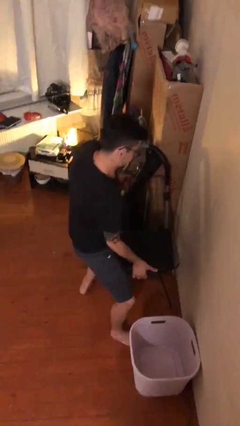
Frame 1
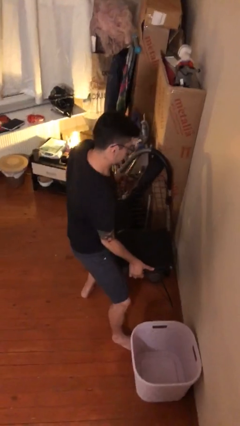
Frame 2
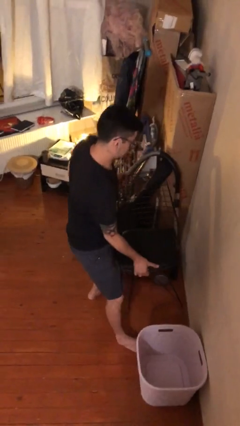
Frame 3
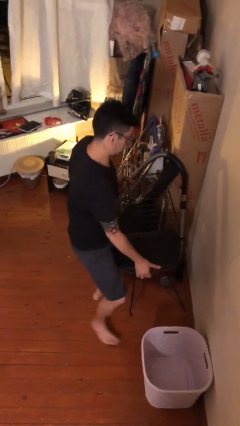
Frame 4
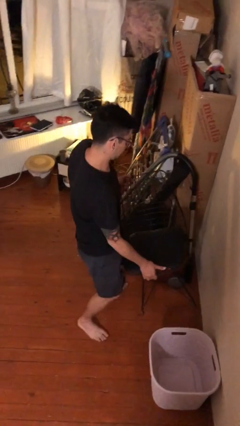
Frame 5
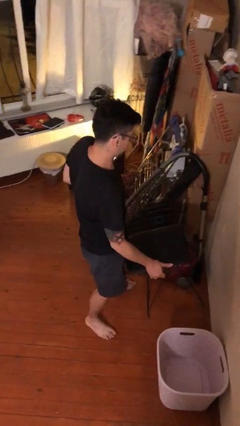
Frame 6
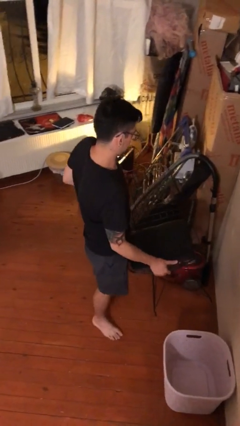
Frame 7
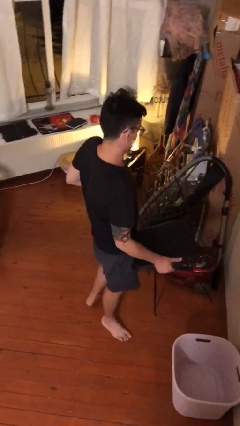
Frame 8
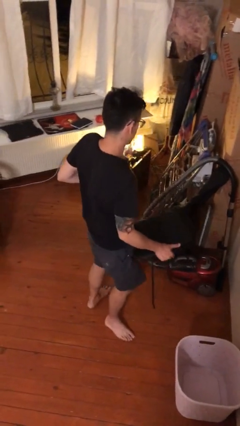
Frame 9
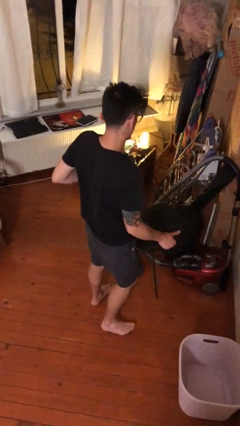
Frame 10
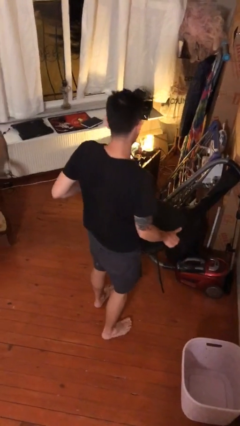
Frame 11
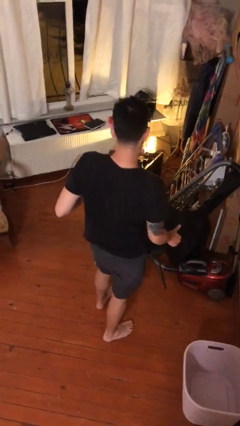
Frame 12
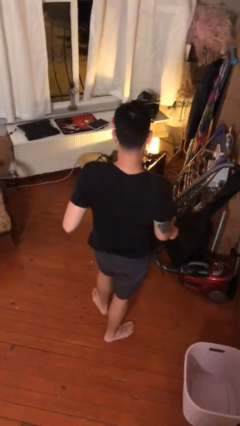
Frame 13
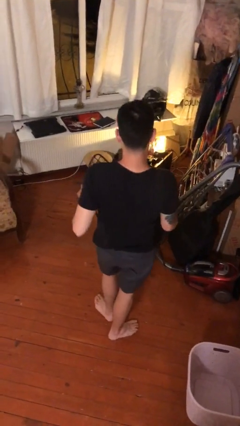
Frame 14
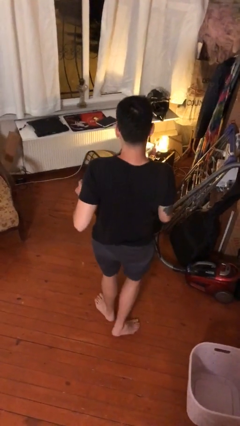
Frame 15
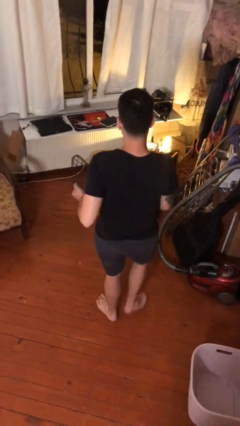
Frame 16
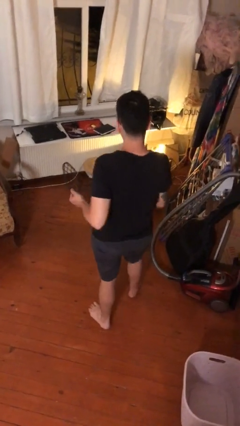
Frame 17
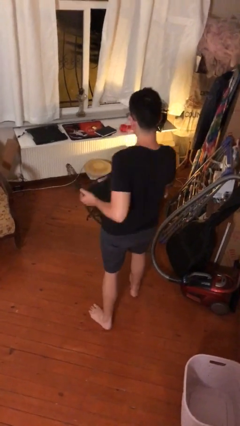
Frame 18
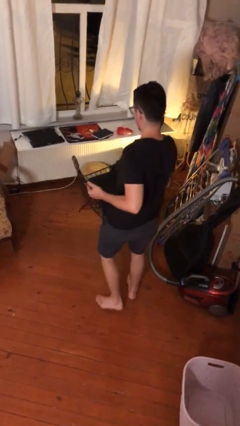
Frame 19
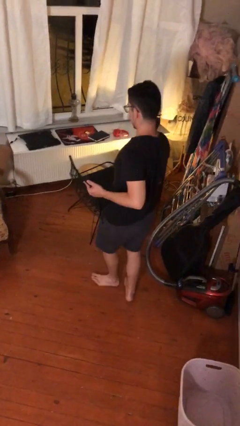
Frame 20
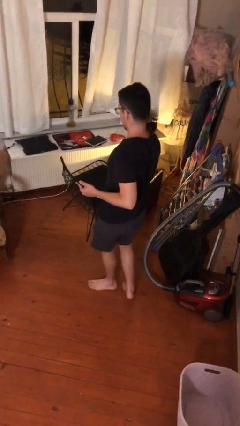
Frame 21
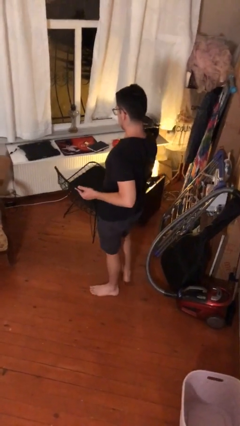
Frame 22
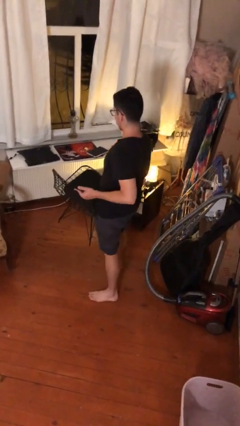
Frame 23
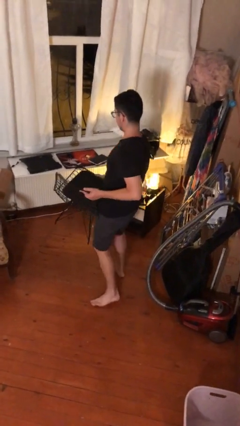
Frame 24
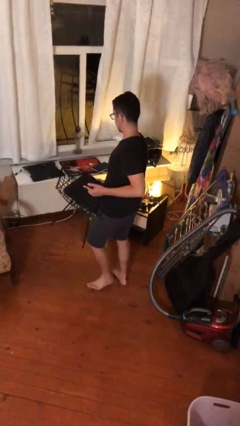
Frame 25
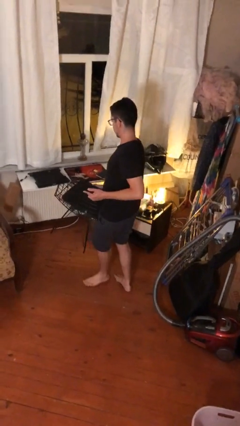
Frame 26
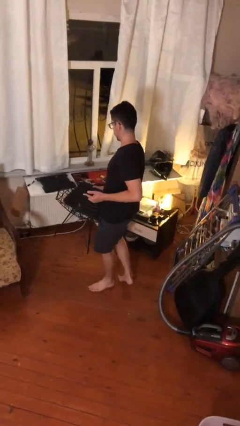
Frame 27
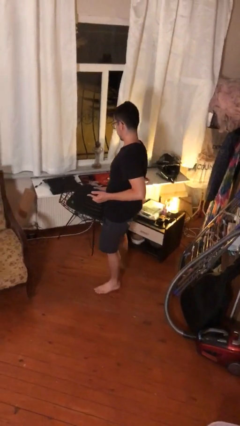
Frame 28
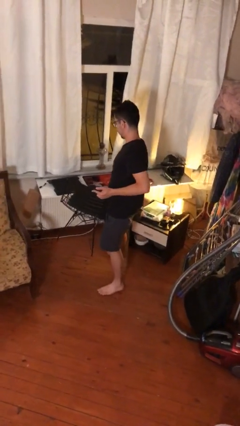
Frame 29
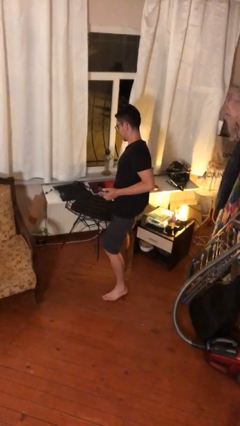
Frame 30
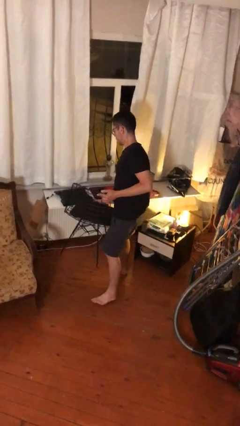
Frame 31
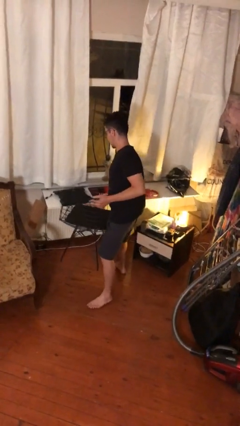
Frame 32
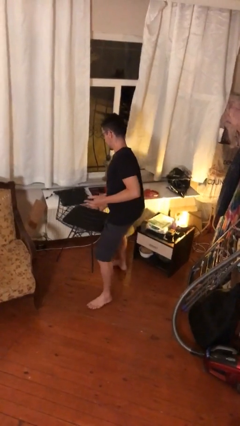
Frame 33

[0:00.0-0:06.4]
person carries heavy object

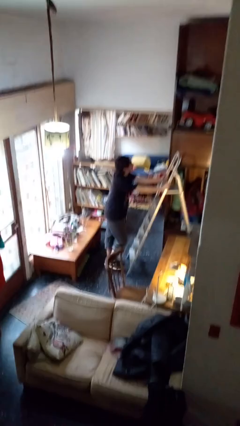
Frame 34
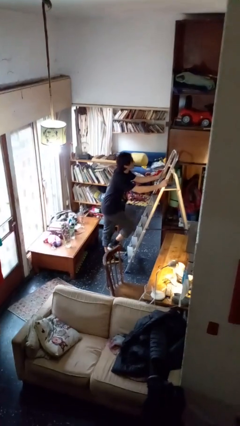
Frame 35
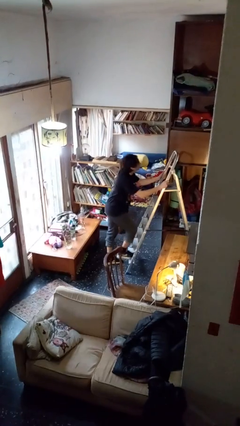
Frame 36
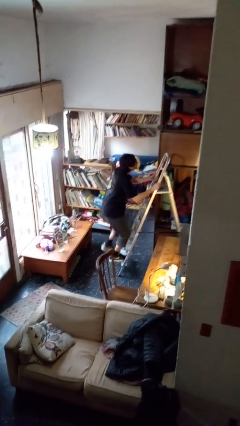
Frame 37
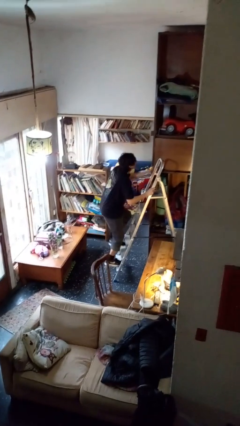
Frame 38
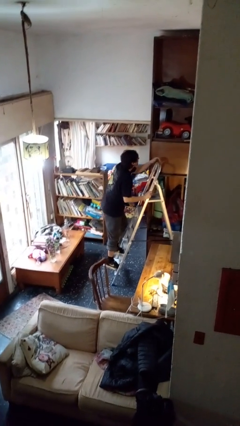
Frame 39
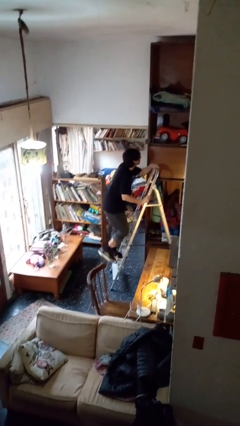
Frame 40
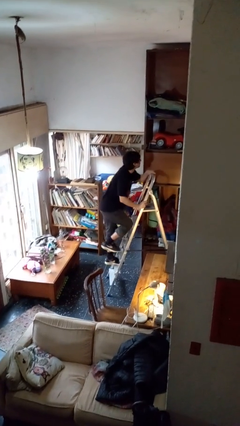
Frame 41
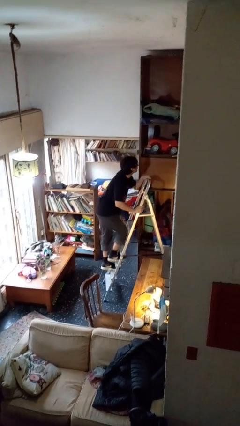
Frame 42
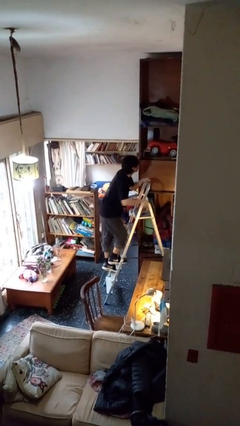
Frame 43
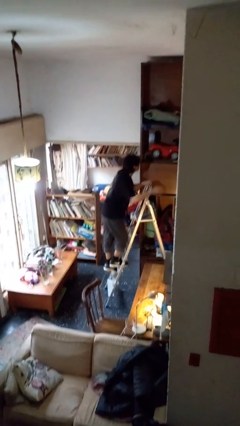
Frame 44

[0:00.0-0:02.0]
person climbs up ladder

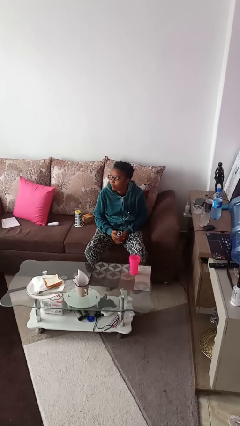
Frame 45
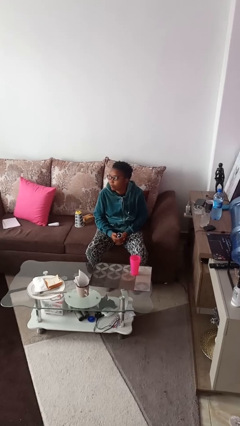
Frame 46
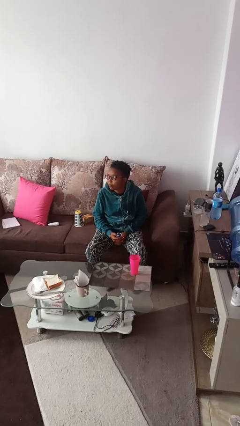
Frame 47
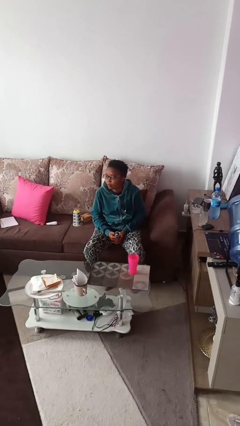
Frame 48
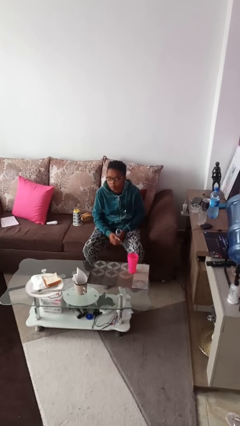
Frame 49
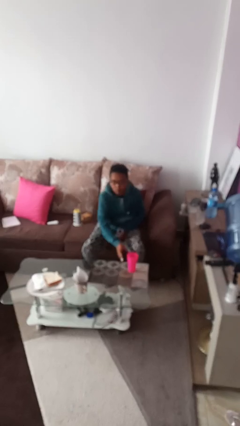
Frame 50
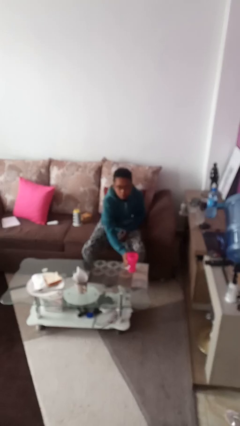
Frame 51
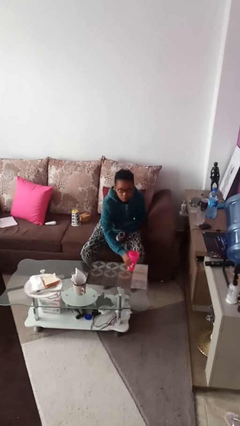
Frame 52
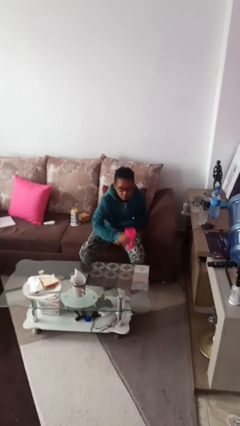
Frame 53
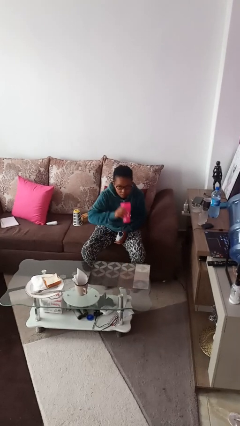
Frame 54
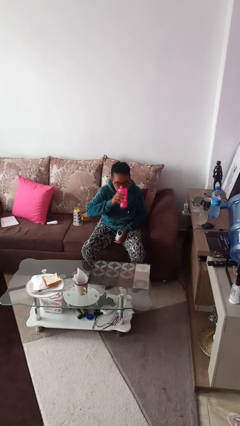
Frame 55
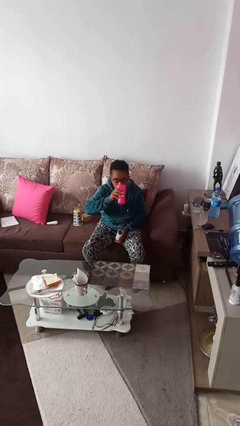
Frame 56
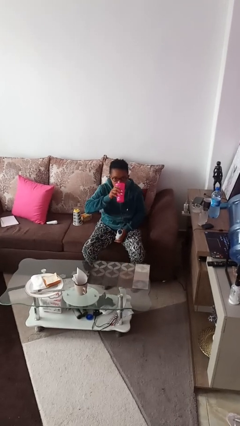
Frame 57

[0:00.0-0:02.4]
person drinks from cup

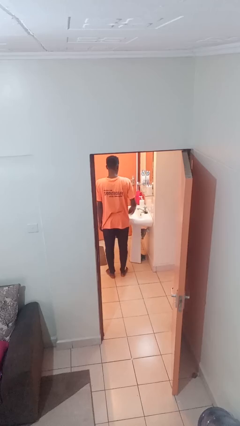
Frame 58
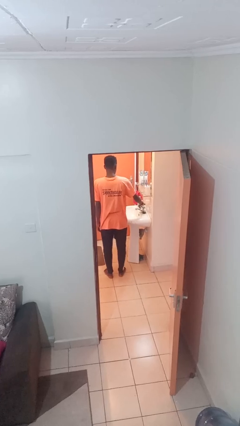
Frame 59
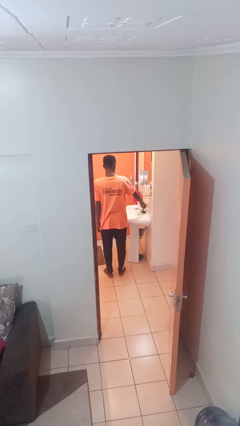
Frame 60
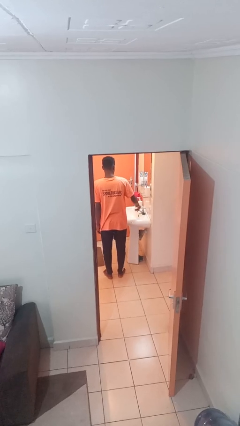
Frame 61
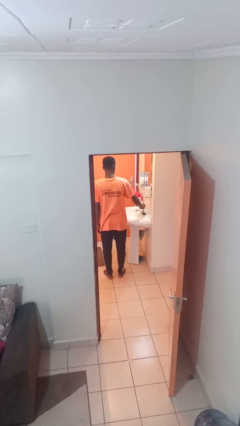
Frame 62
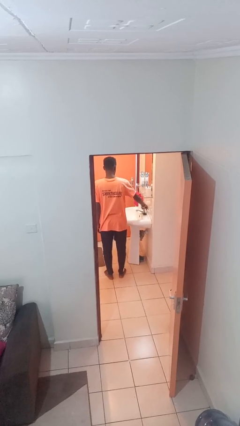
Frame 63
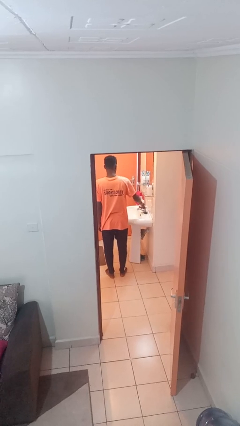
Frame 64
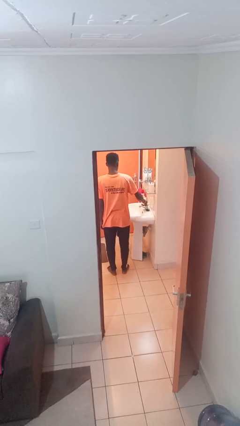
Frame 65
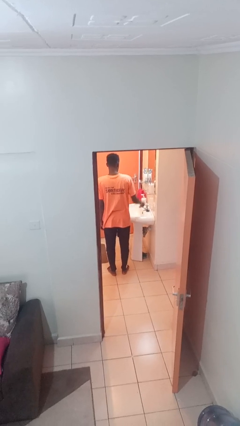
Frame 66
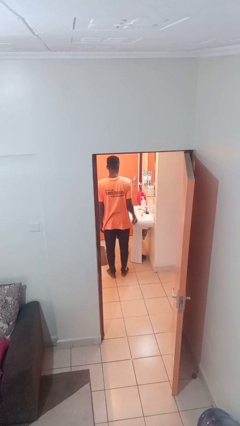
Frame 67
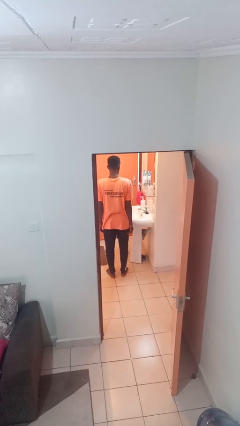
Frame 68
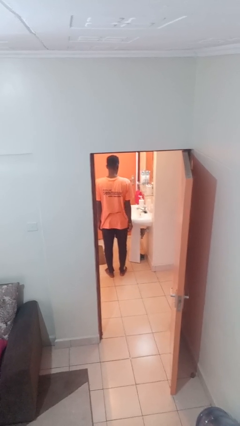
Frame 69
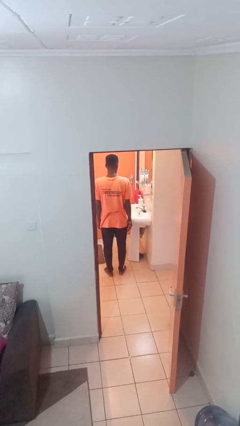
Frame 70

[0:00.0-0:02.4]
person turns off faucet

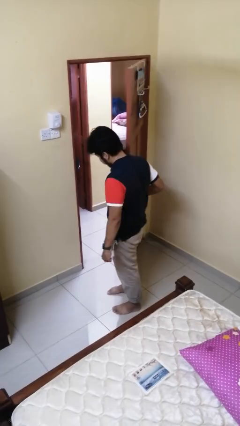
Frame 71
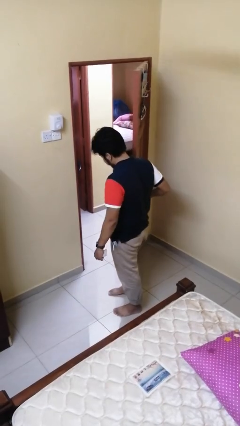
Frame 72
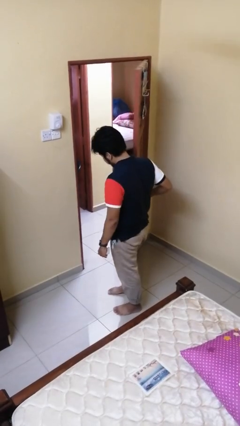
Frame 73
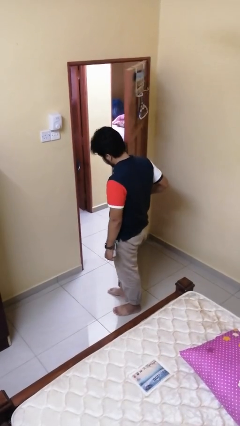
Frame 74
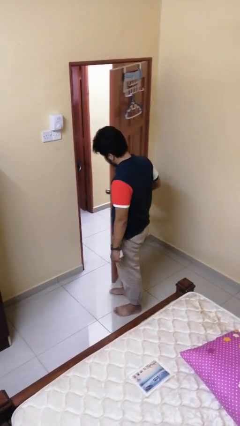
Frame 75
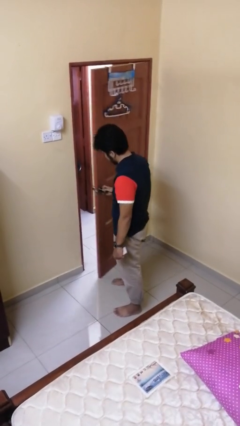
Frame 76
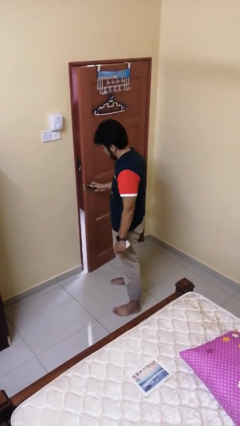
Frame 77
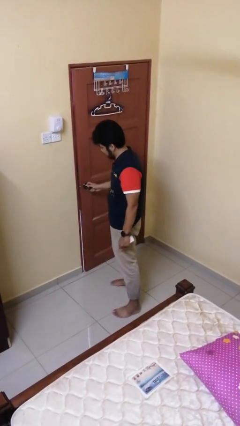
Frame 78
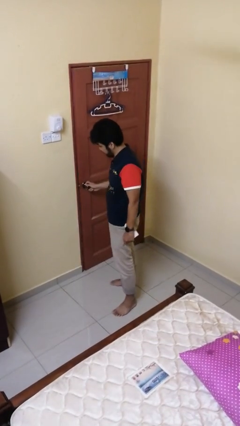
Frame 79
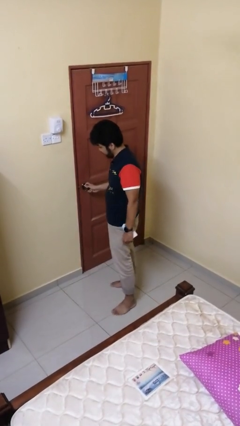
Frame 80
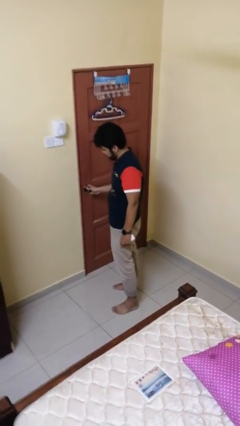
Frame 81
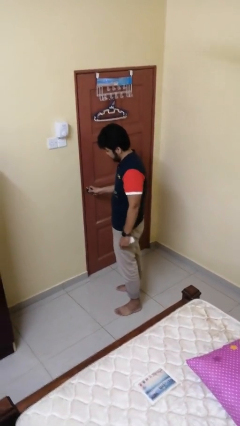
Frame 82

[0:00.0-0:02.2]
person closes facility door

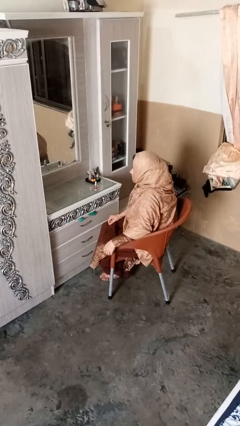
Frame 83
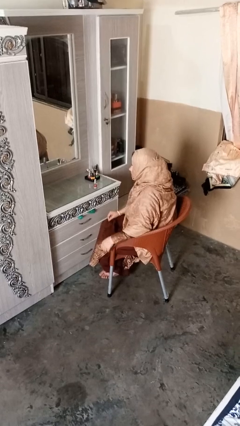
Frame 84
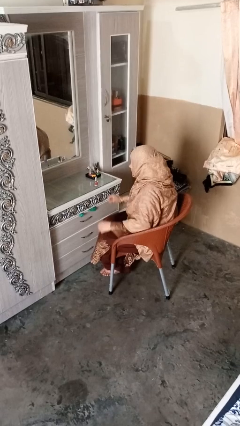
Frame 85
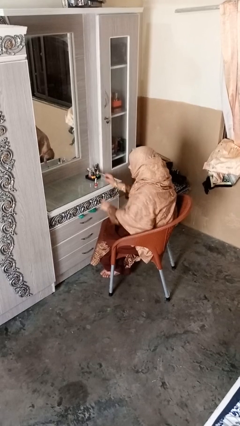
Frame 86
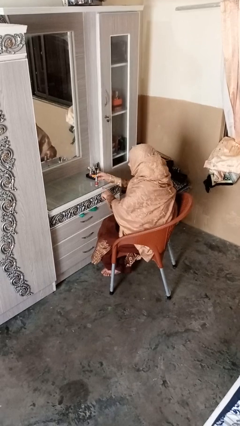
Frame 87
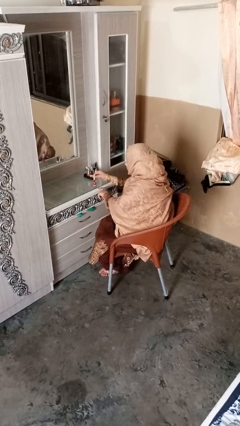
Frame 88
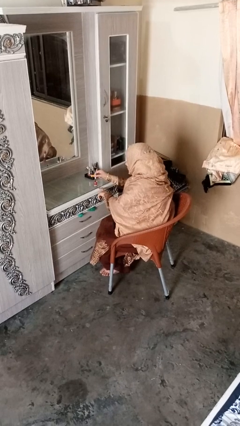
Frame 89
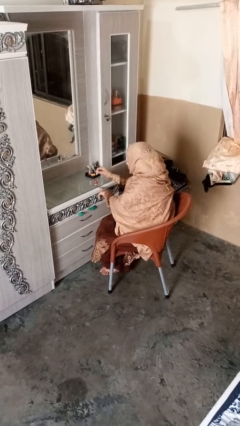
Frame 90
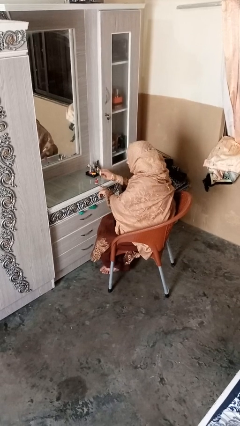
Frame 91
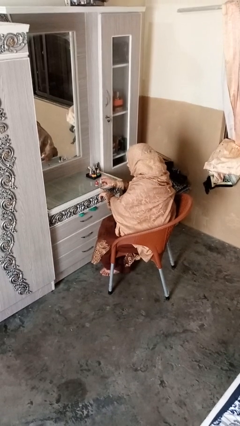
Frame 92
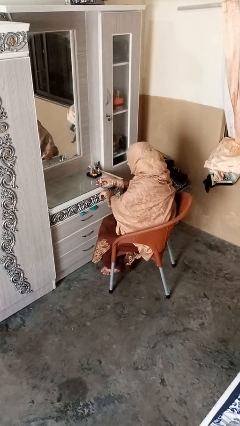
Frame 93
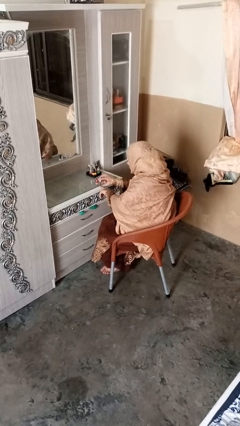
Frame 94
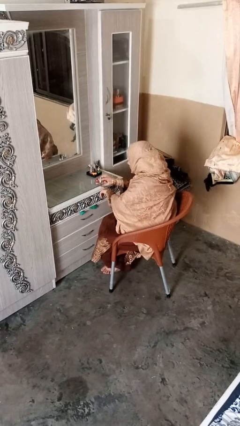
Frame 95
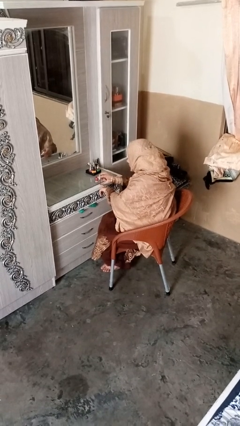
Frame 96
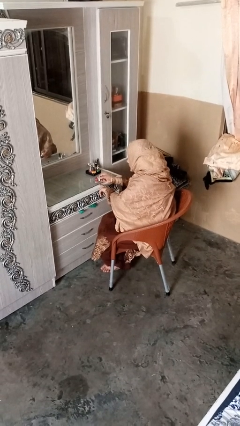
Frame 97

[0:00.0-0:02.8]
person paints fingernails
